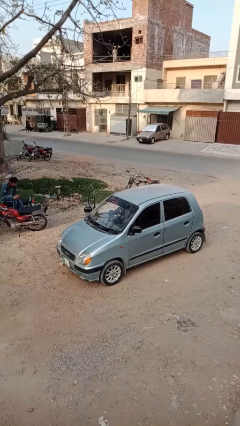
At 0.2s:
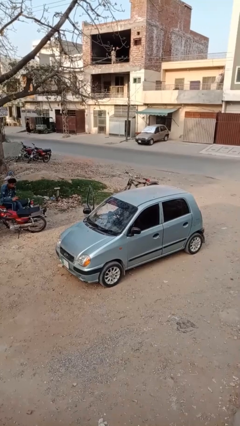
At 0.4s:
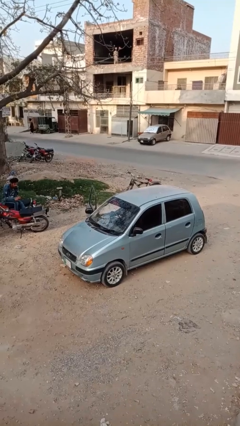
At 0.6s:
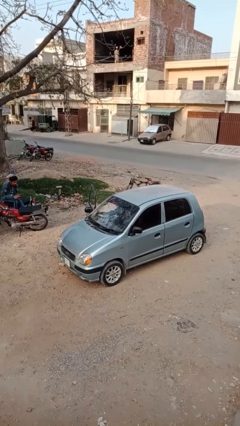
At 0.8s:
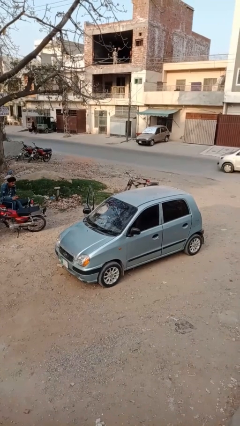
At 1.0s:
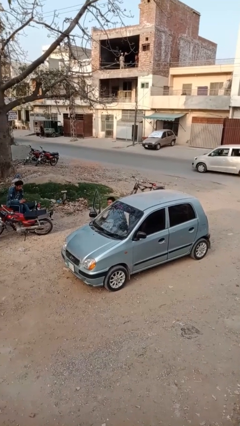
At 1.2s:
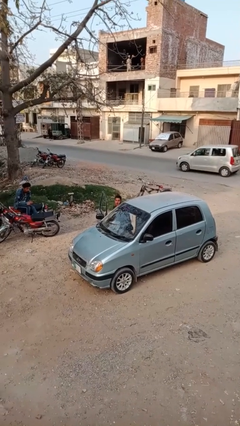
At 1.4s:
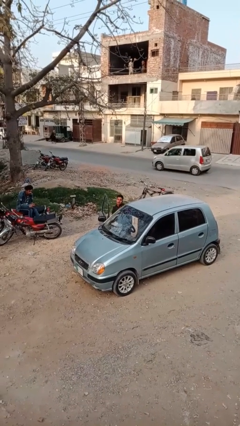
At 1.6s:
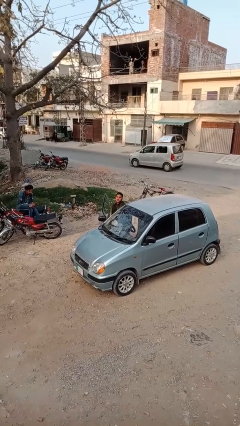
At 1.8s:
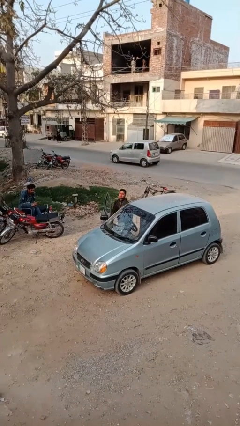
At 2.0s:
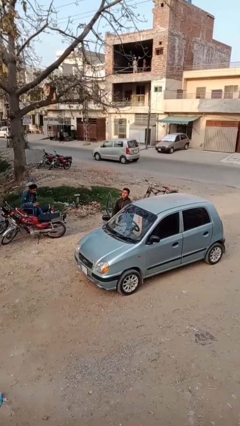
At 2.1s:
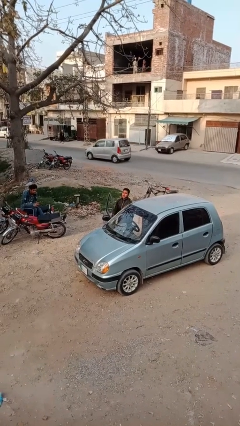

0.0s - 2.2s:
person exits car

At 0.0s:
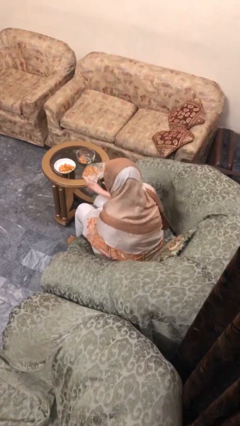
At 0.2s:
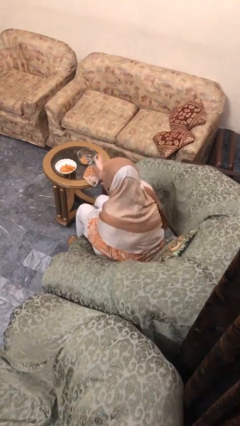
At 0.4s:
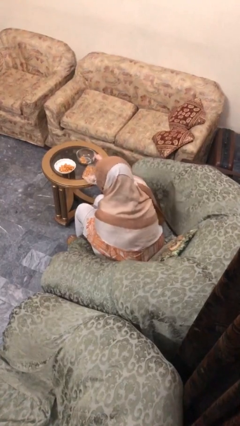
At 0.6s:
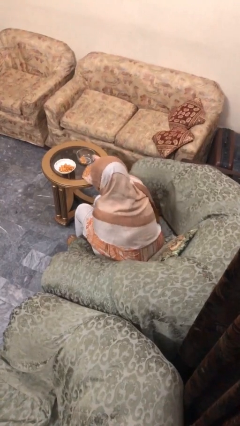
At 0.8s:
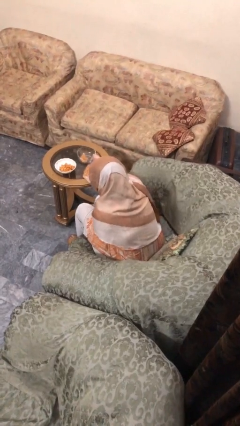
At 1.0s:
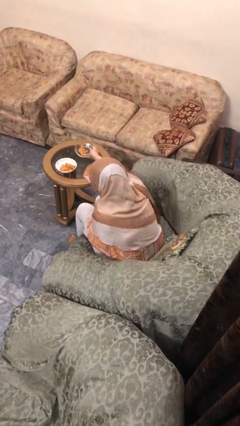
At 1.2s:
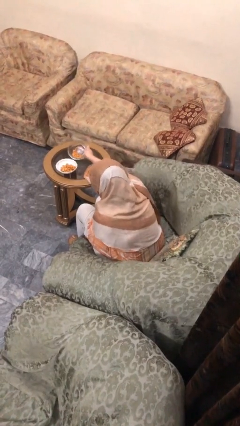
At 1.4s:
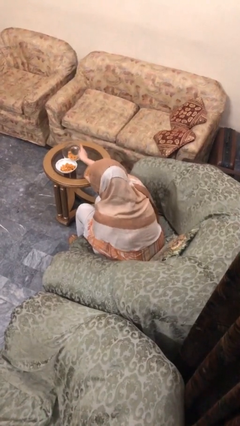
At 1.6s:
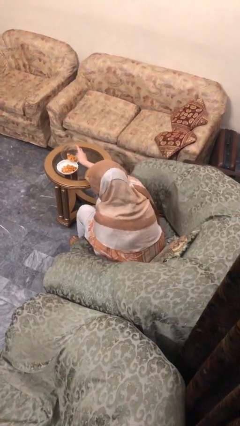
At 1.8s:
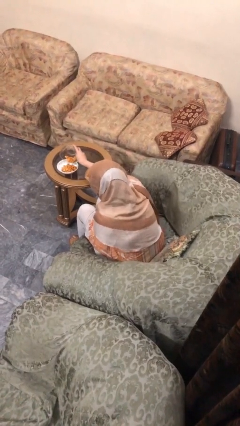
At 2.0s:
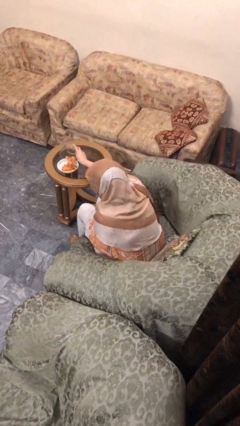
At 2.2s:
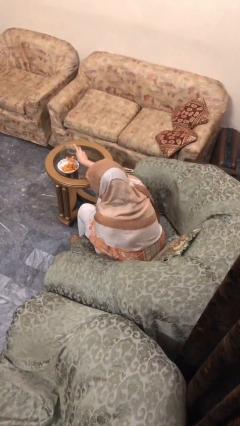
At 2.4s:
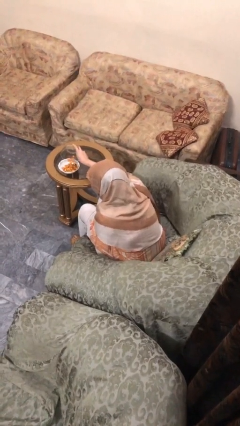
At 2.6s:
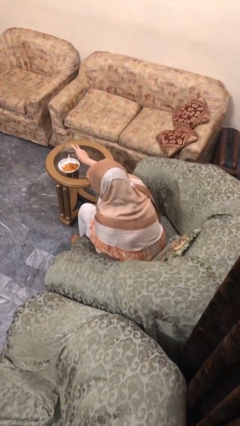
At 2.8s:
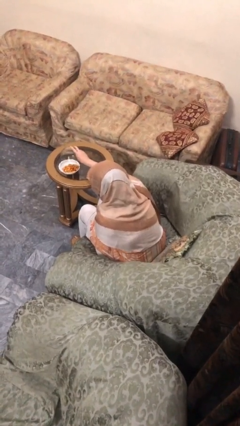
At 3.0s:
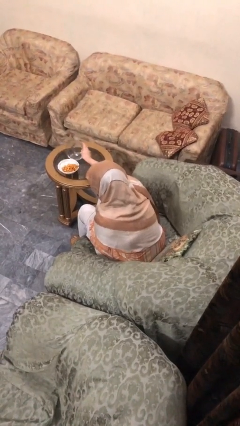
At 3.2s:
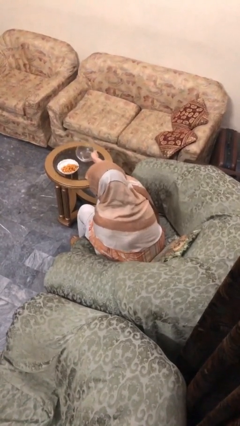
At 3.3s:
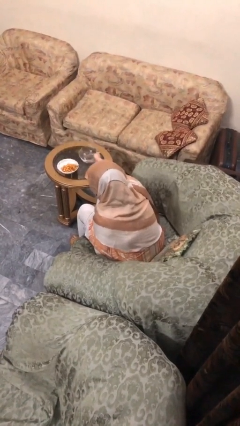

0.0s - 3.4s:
person pours into bowl

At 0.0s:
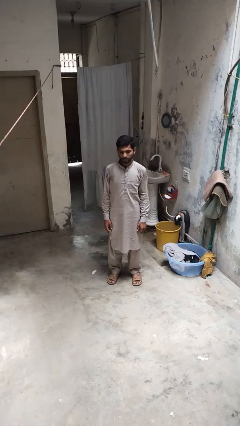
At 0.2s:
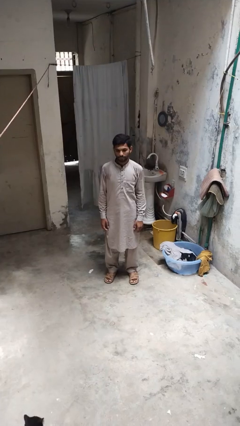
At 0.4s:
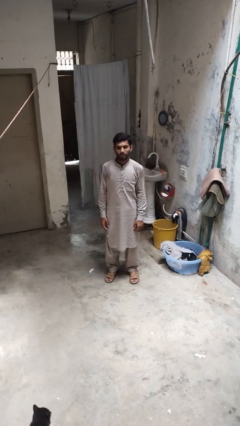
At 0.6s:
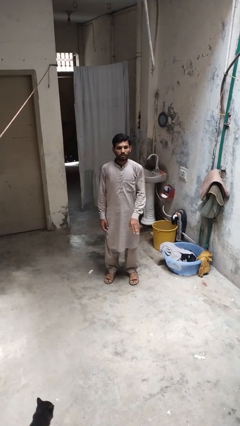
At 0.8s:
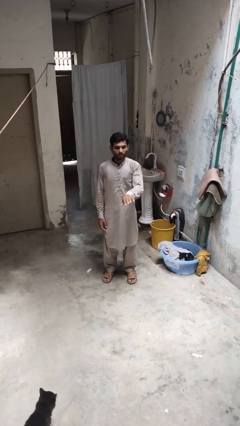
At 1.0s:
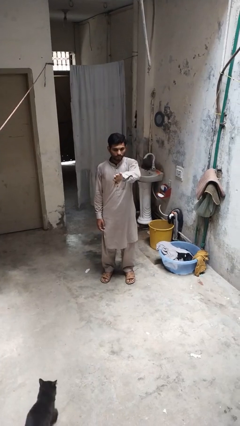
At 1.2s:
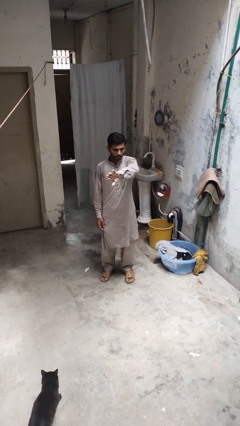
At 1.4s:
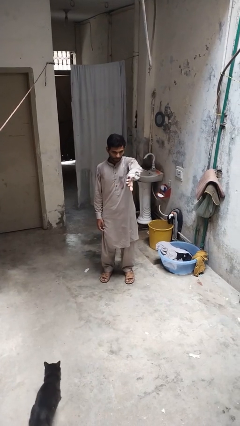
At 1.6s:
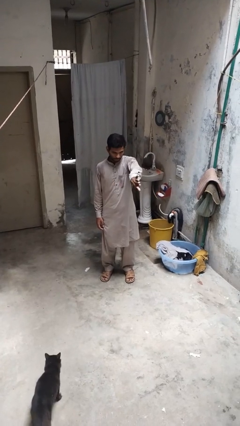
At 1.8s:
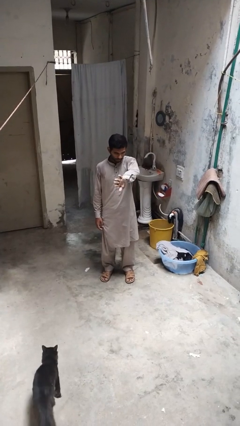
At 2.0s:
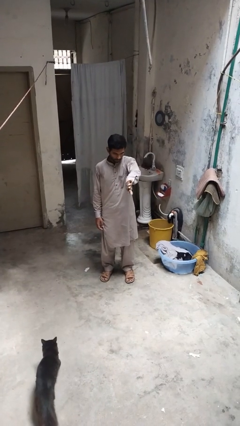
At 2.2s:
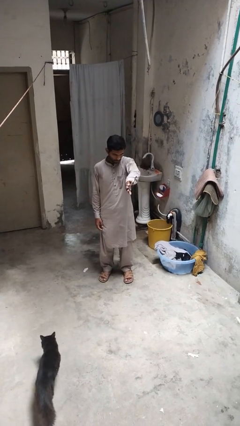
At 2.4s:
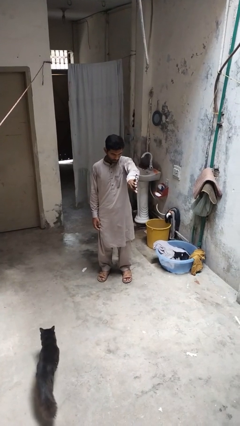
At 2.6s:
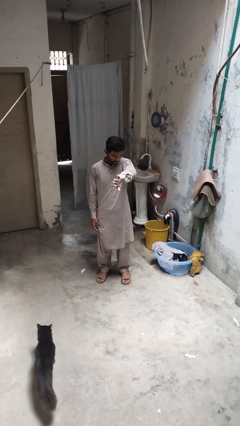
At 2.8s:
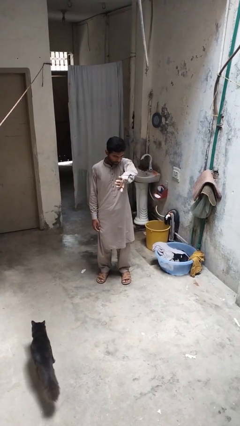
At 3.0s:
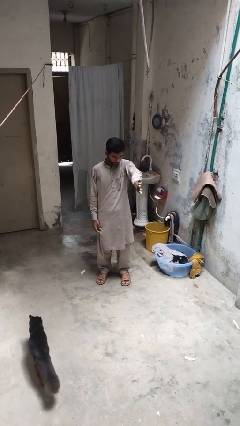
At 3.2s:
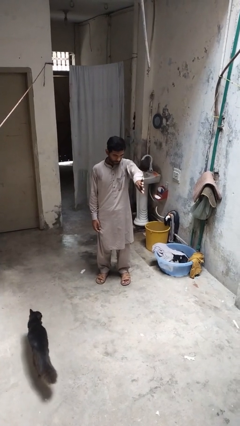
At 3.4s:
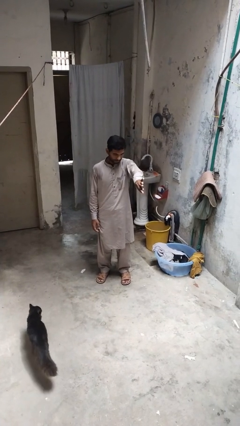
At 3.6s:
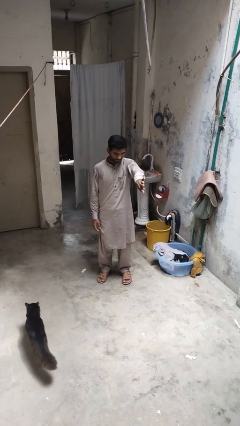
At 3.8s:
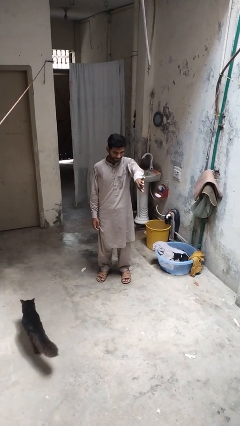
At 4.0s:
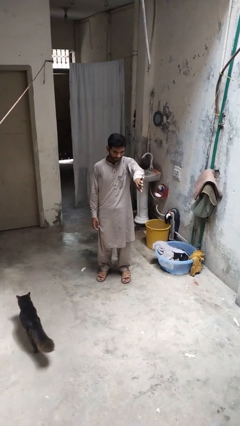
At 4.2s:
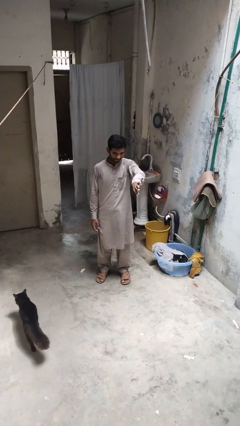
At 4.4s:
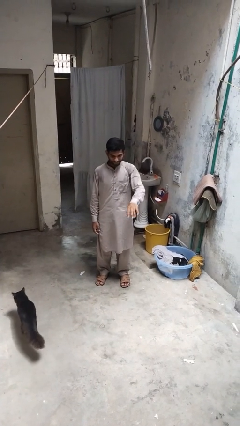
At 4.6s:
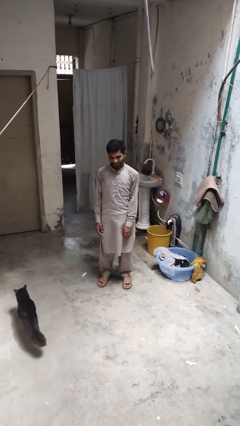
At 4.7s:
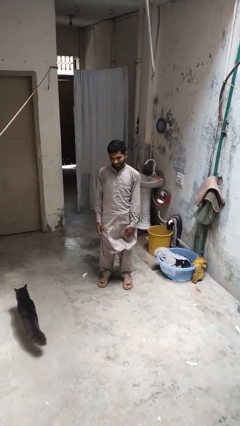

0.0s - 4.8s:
person gestures swipe left

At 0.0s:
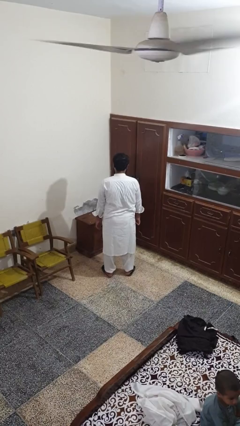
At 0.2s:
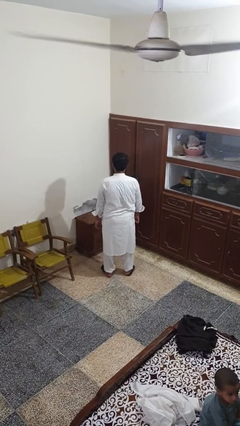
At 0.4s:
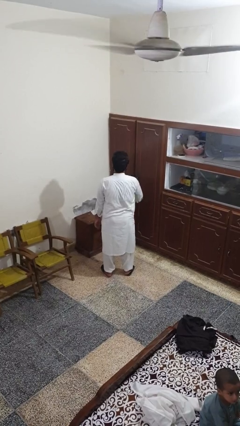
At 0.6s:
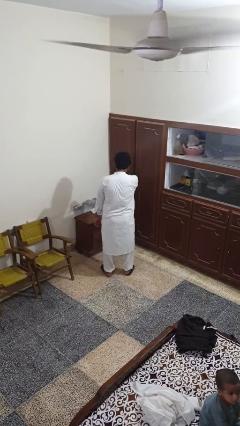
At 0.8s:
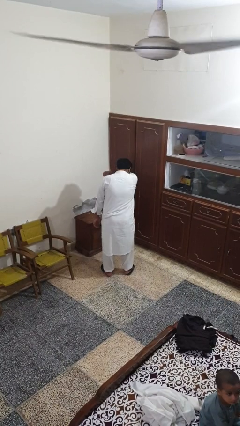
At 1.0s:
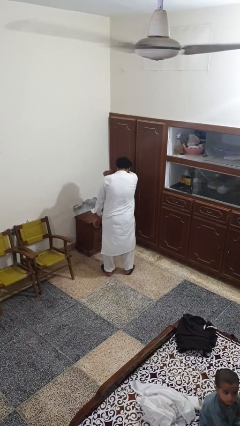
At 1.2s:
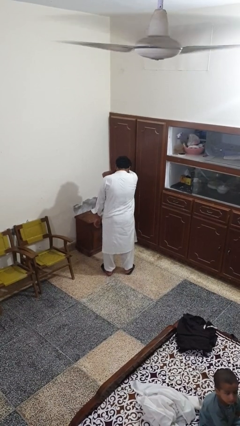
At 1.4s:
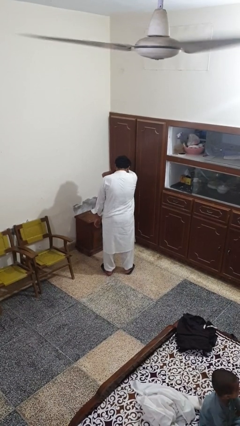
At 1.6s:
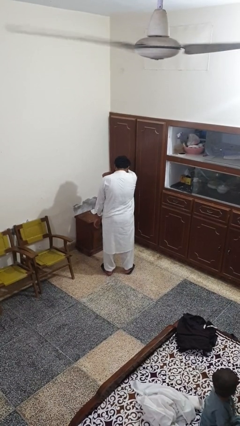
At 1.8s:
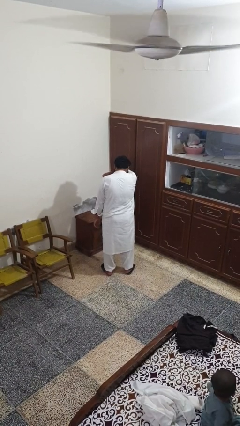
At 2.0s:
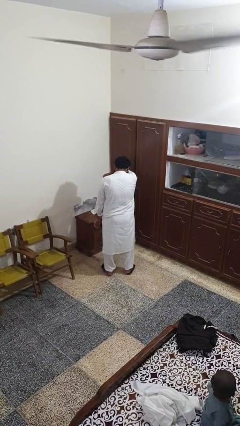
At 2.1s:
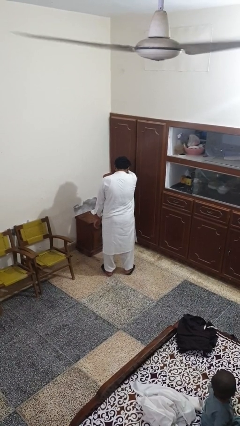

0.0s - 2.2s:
person sneezes into arm

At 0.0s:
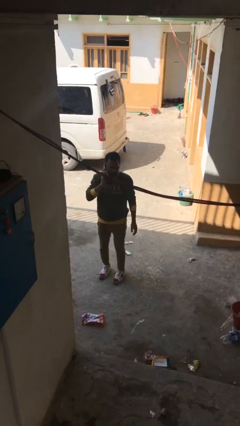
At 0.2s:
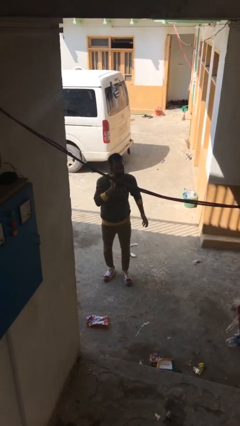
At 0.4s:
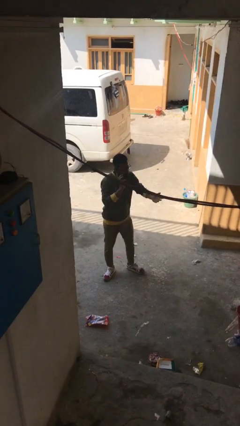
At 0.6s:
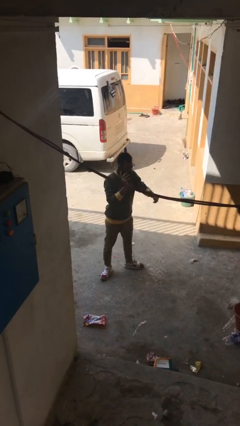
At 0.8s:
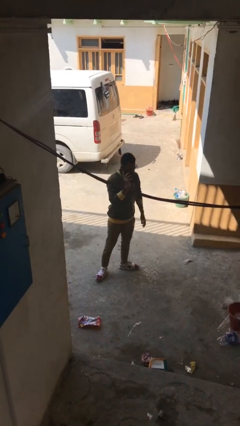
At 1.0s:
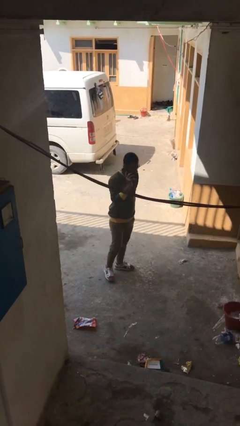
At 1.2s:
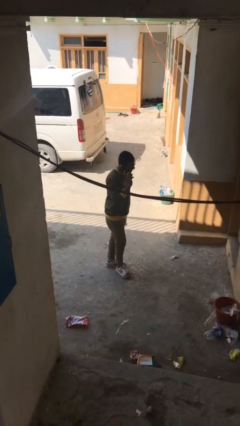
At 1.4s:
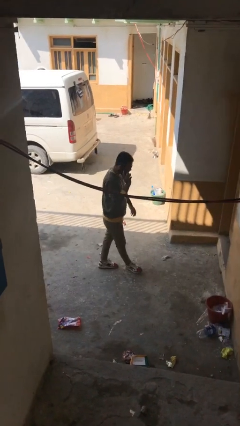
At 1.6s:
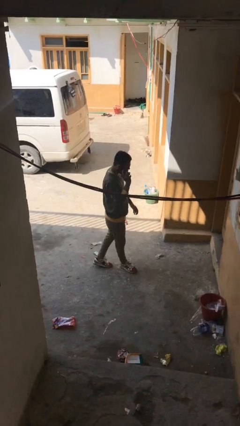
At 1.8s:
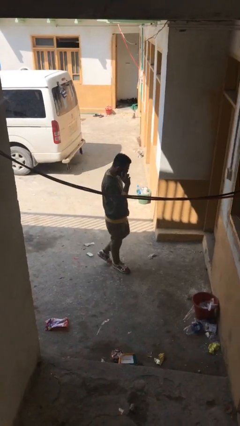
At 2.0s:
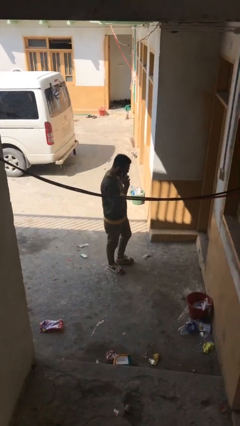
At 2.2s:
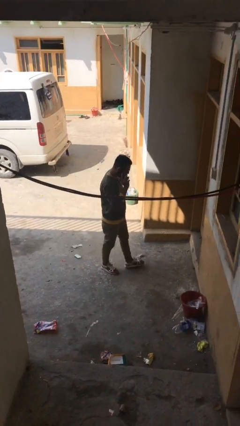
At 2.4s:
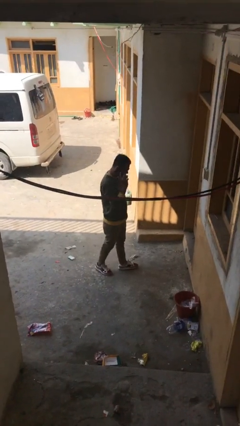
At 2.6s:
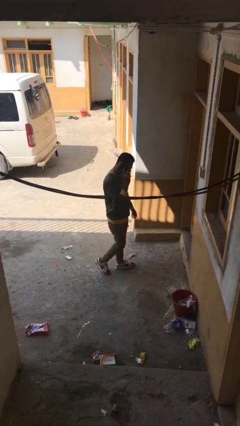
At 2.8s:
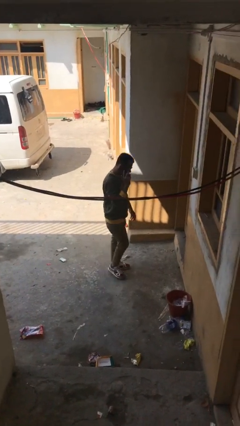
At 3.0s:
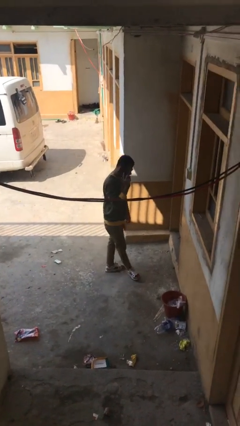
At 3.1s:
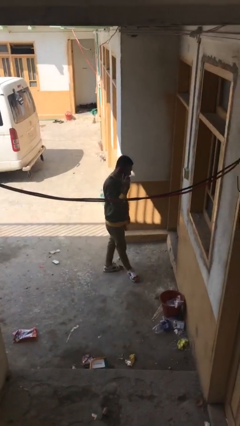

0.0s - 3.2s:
person talks on phone

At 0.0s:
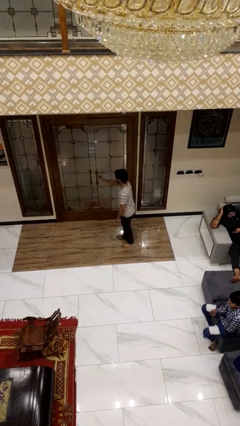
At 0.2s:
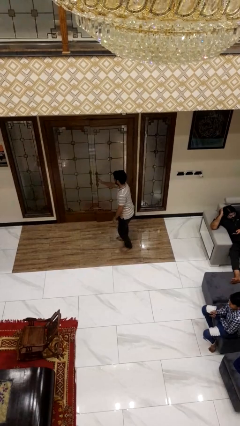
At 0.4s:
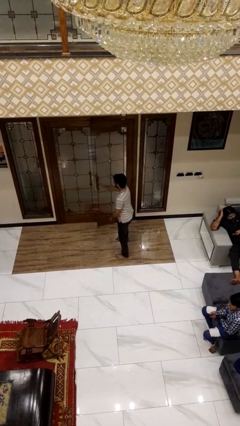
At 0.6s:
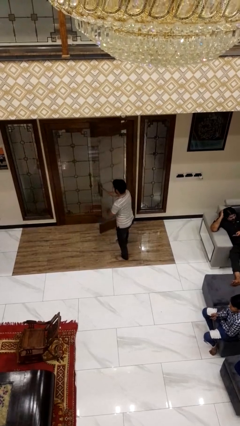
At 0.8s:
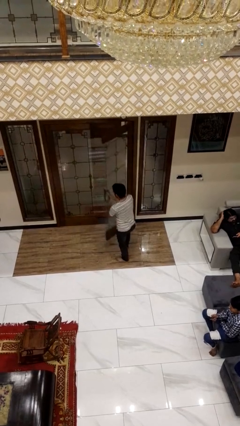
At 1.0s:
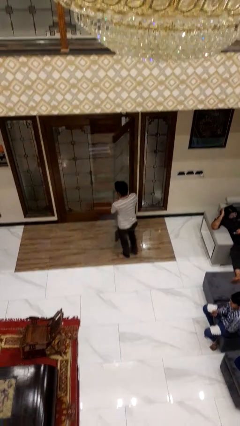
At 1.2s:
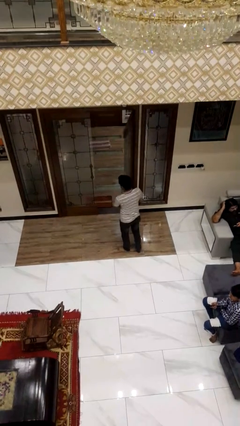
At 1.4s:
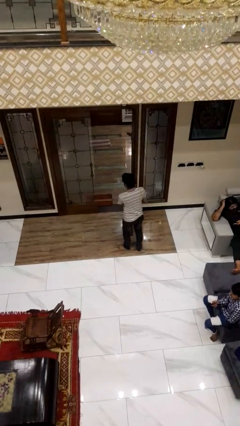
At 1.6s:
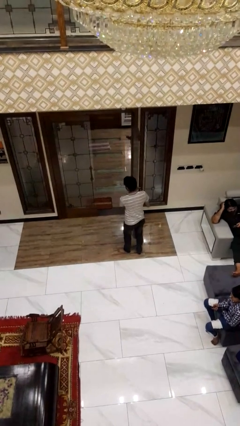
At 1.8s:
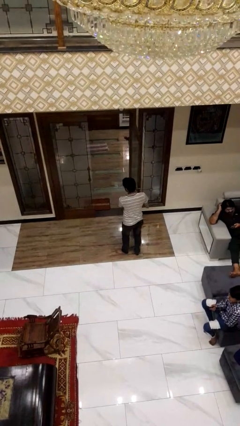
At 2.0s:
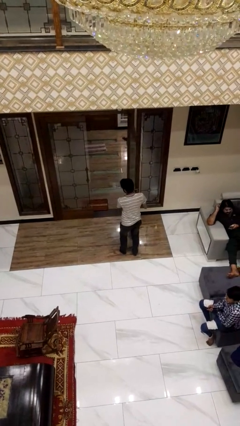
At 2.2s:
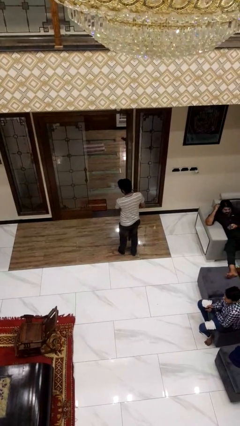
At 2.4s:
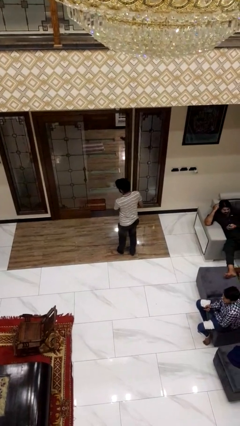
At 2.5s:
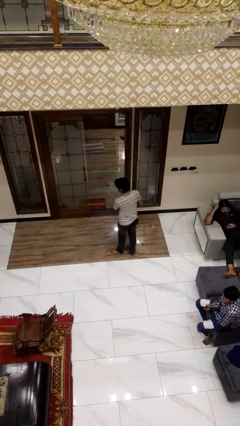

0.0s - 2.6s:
person opens facility door
